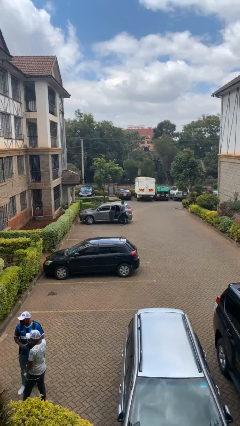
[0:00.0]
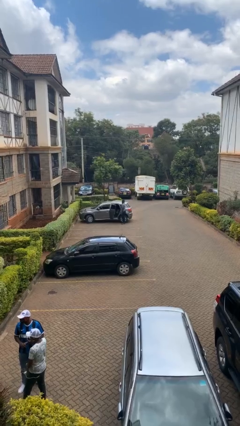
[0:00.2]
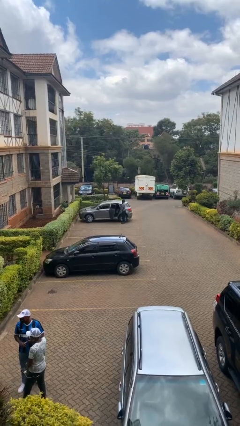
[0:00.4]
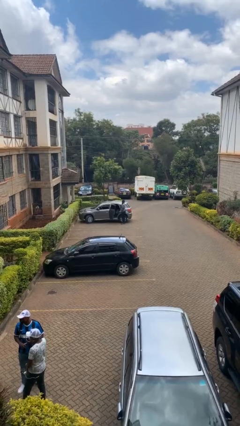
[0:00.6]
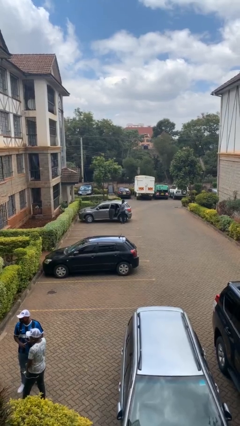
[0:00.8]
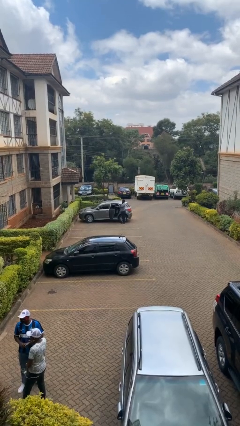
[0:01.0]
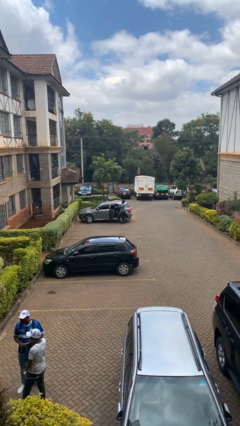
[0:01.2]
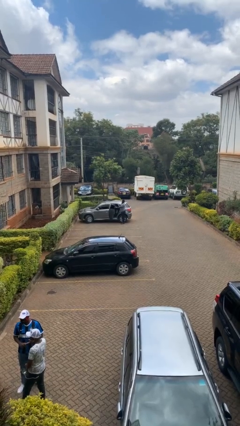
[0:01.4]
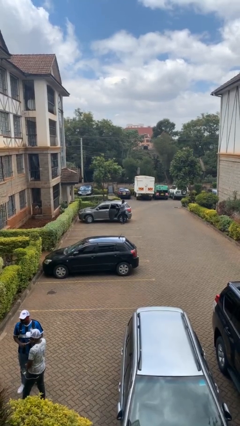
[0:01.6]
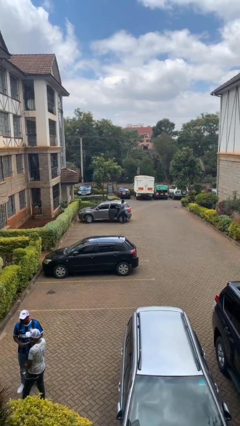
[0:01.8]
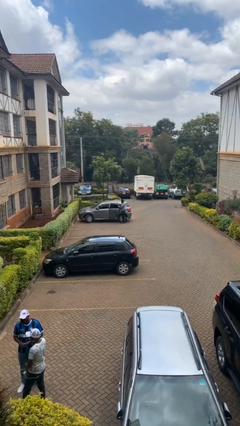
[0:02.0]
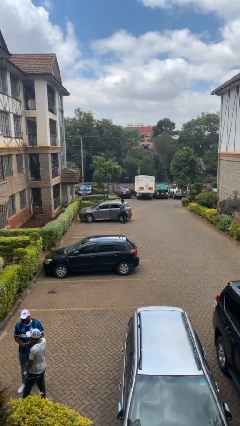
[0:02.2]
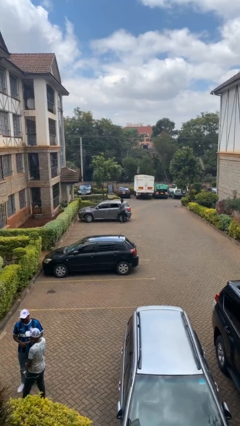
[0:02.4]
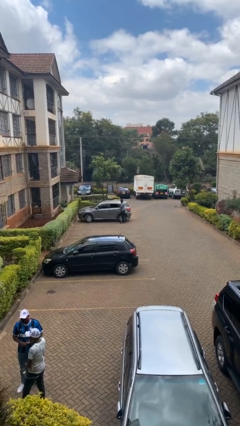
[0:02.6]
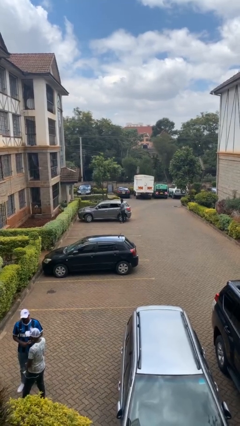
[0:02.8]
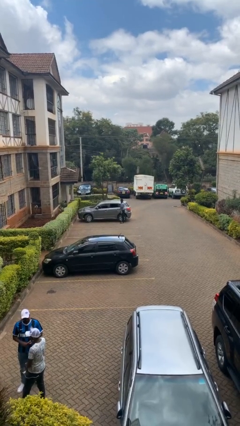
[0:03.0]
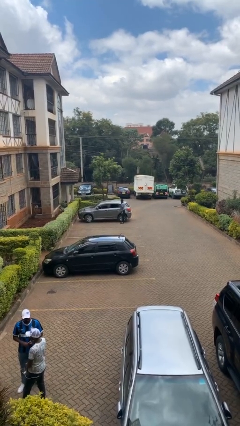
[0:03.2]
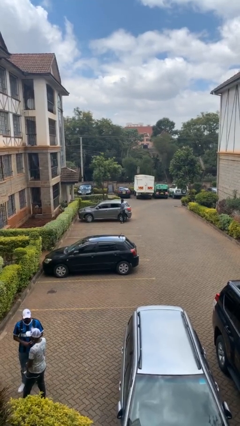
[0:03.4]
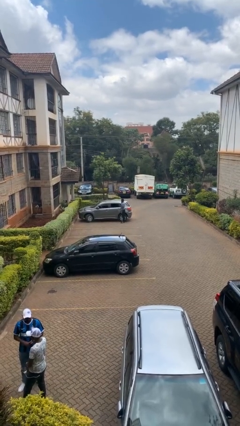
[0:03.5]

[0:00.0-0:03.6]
person closes car door

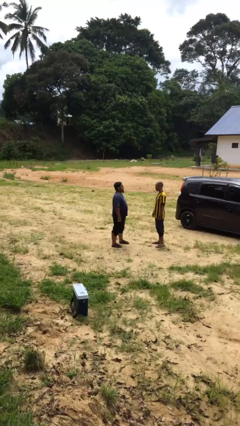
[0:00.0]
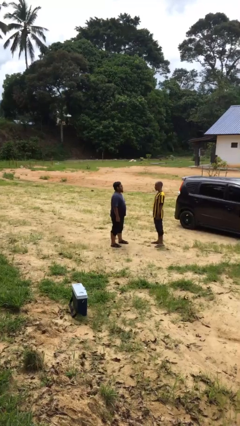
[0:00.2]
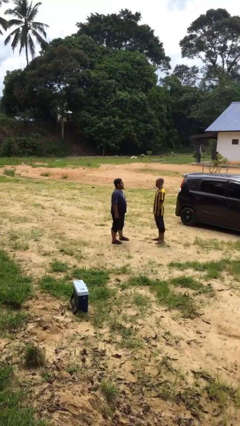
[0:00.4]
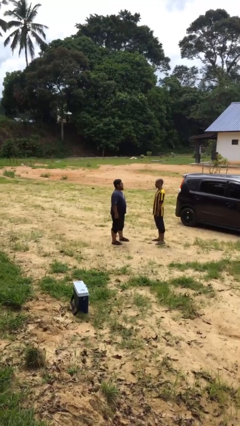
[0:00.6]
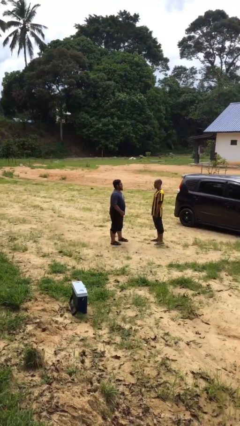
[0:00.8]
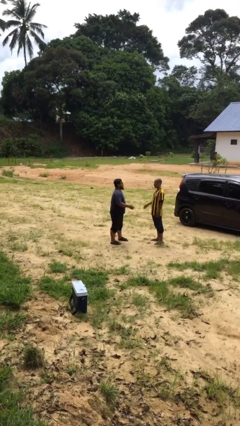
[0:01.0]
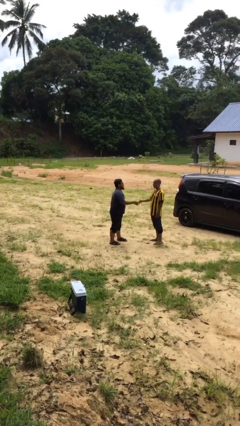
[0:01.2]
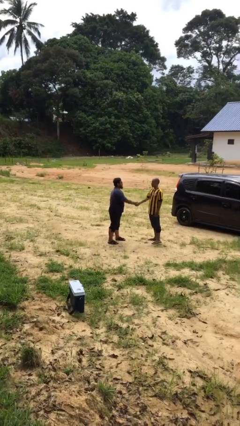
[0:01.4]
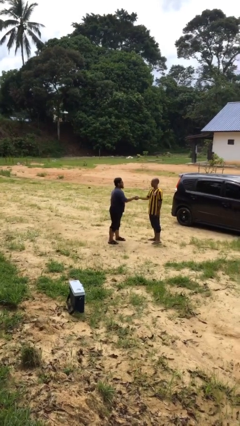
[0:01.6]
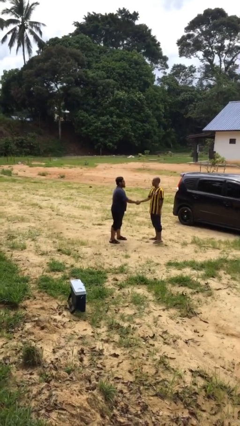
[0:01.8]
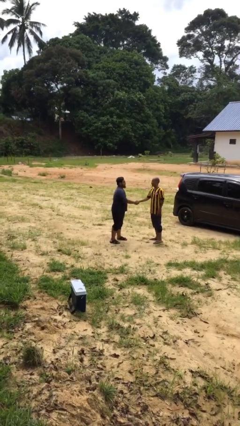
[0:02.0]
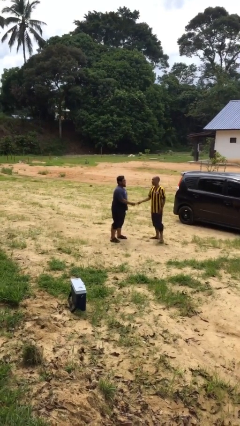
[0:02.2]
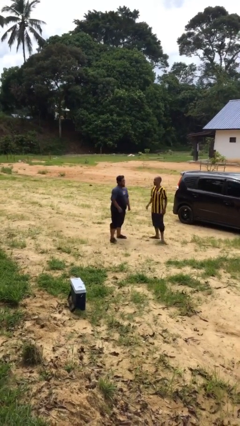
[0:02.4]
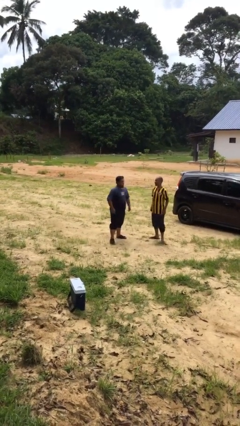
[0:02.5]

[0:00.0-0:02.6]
person shakes hand

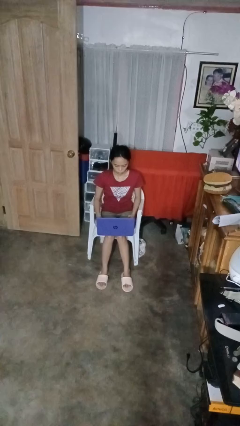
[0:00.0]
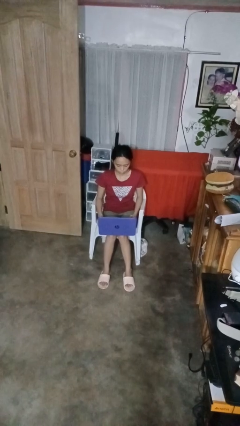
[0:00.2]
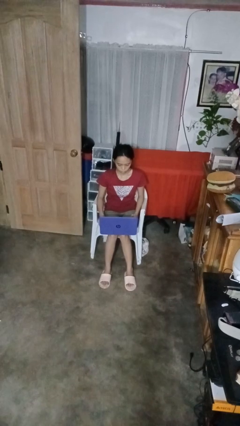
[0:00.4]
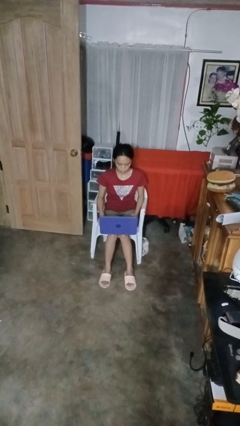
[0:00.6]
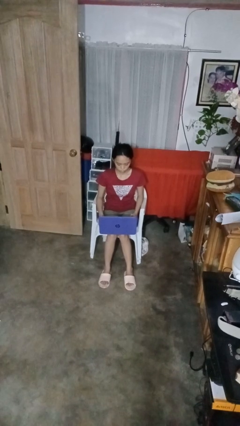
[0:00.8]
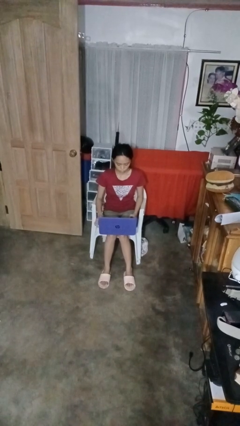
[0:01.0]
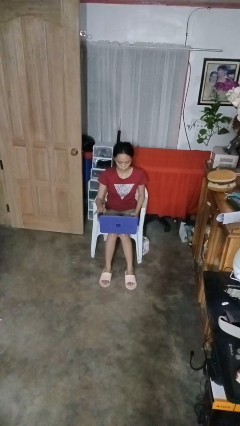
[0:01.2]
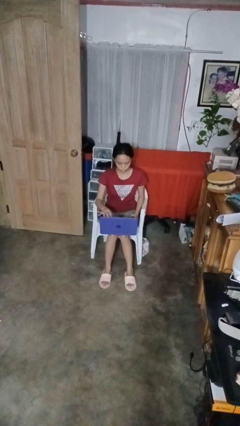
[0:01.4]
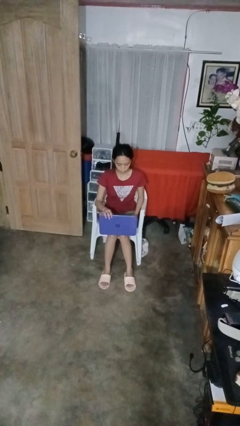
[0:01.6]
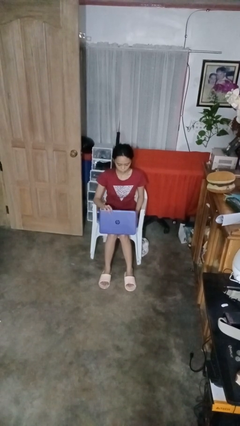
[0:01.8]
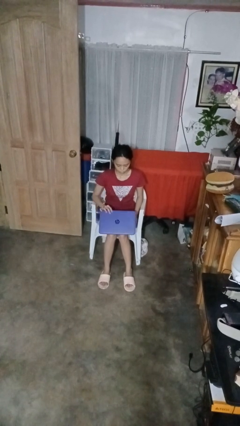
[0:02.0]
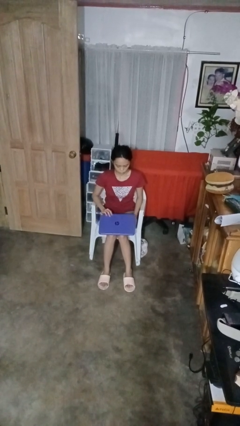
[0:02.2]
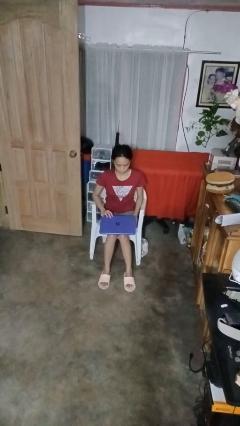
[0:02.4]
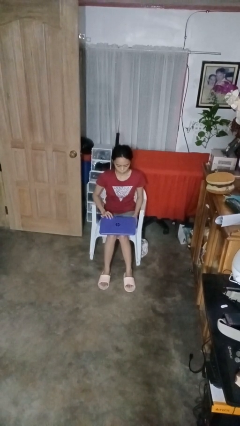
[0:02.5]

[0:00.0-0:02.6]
person closes laptop

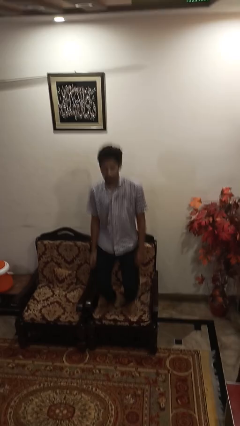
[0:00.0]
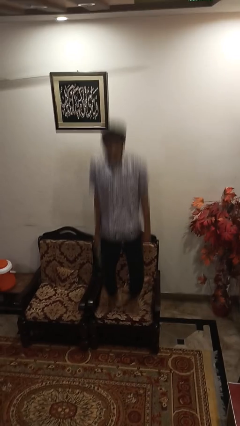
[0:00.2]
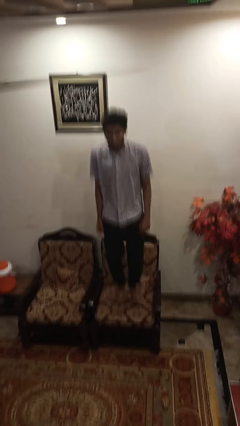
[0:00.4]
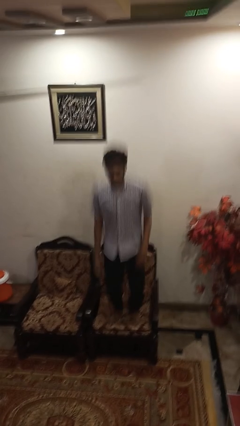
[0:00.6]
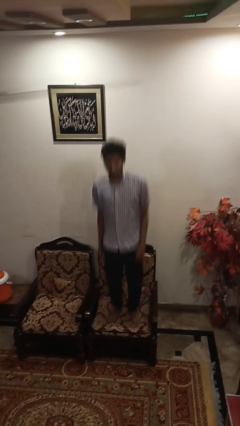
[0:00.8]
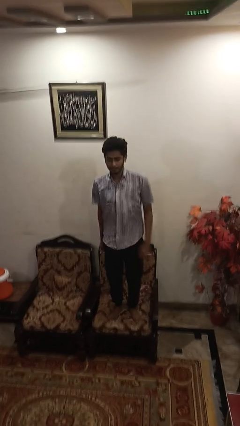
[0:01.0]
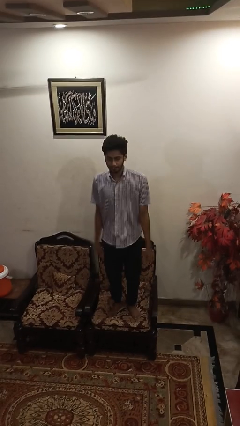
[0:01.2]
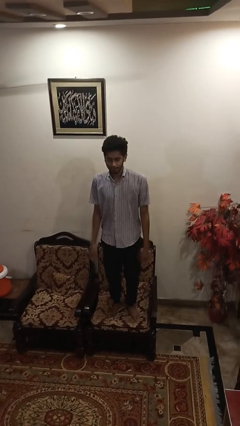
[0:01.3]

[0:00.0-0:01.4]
person jumps on couch

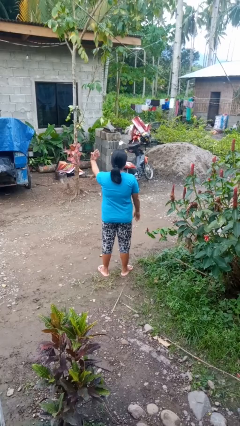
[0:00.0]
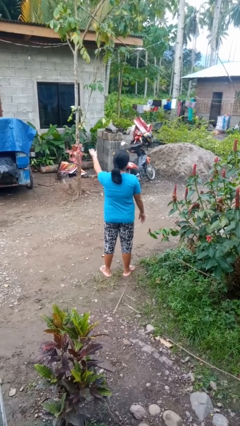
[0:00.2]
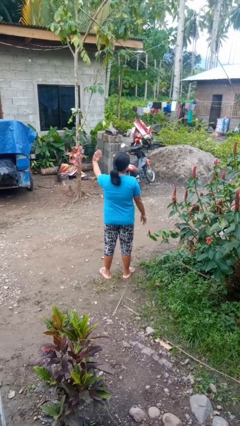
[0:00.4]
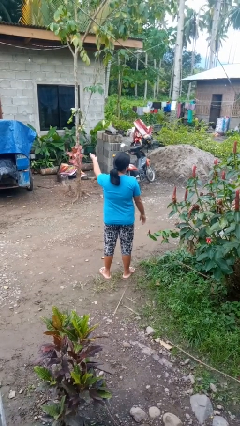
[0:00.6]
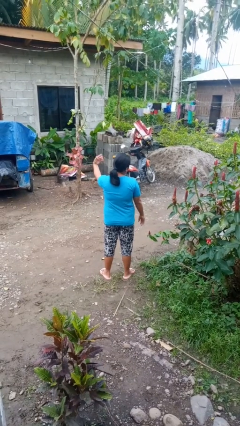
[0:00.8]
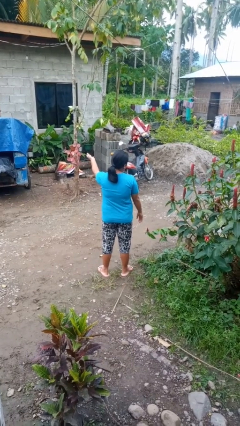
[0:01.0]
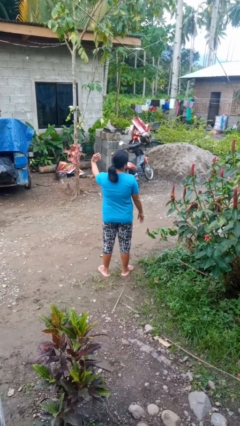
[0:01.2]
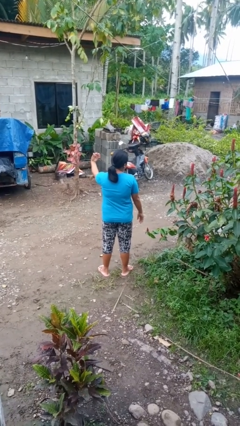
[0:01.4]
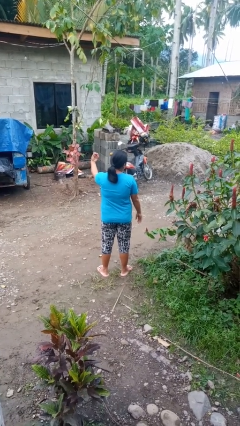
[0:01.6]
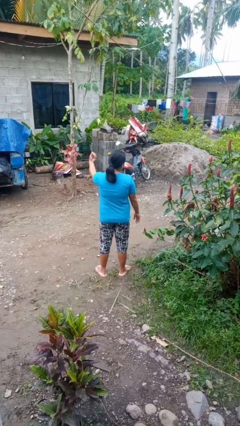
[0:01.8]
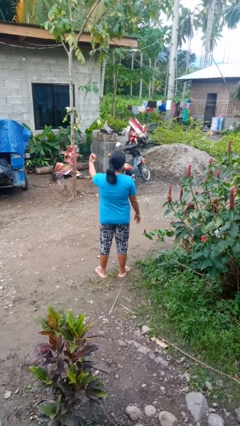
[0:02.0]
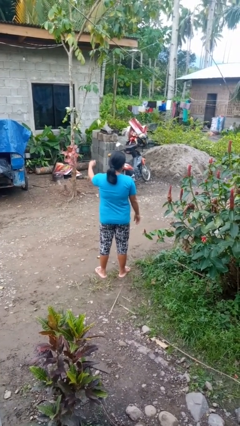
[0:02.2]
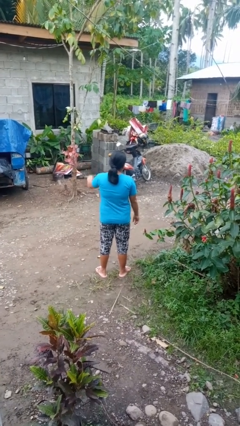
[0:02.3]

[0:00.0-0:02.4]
person gestures come here

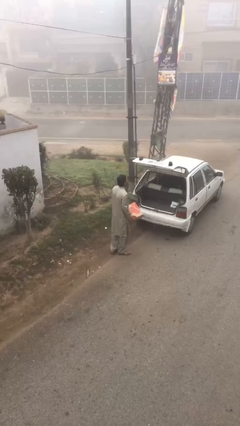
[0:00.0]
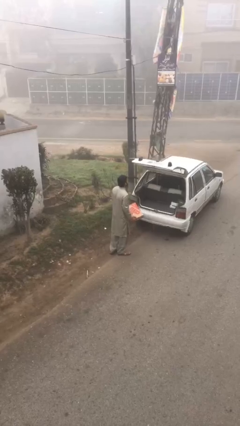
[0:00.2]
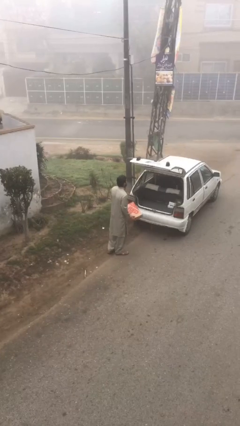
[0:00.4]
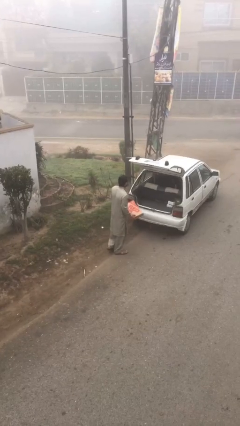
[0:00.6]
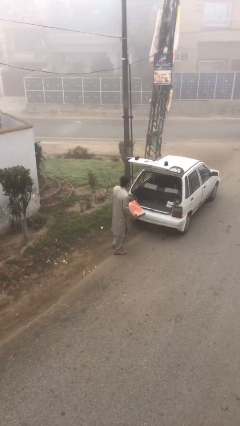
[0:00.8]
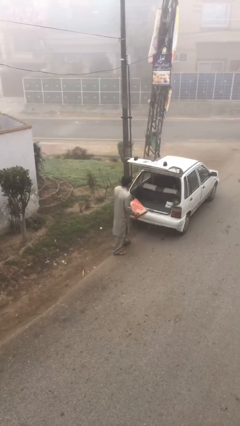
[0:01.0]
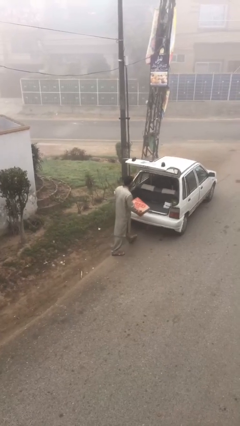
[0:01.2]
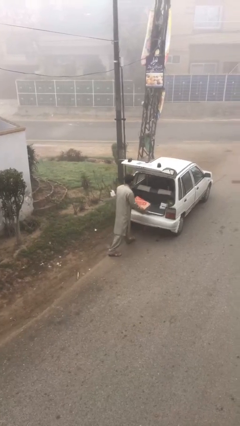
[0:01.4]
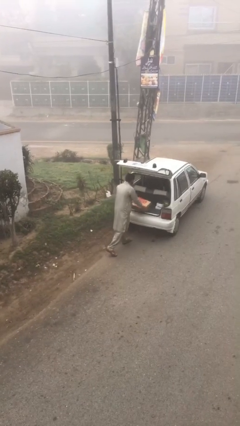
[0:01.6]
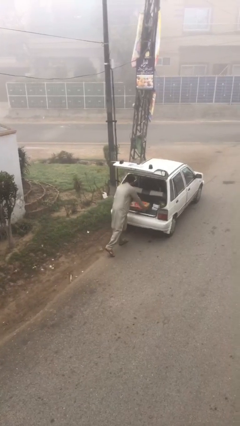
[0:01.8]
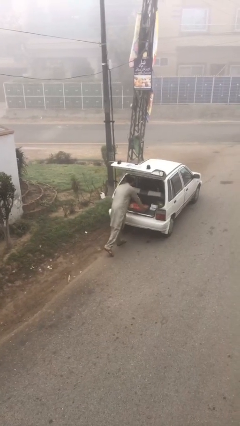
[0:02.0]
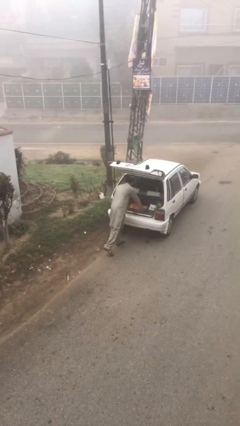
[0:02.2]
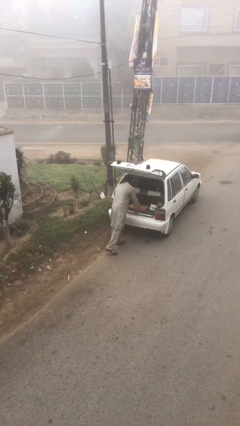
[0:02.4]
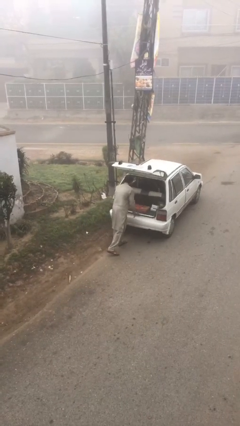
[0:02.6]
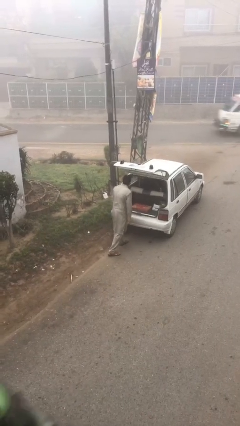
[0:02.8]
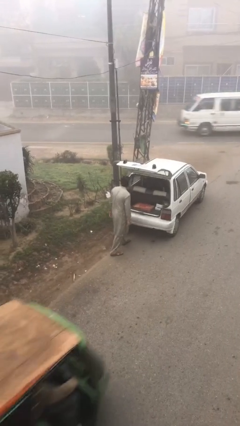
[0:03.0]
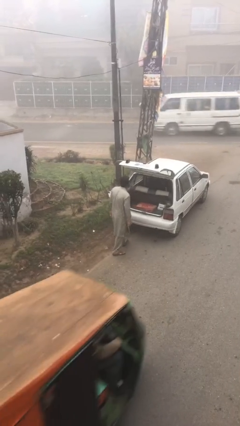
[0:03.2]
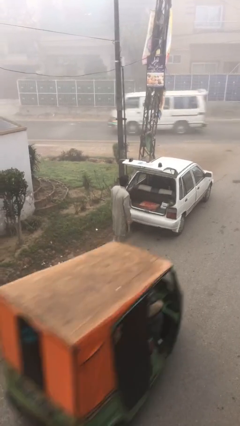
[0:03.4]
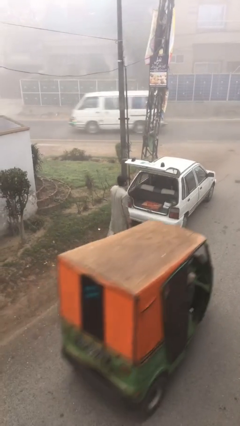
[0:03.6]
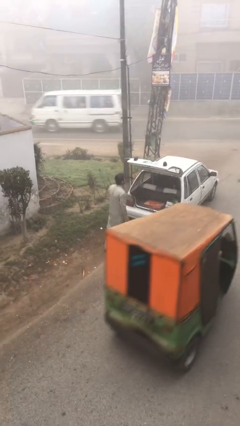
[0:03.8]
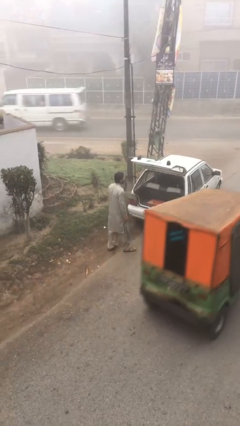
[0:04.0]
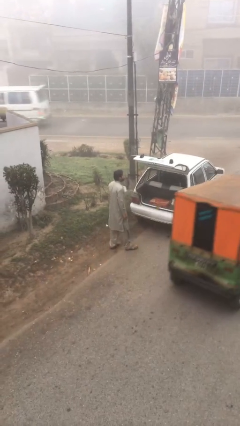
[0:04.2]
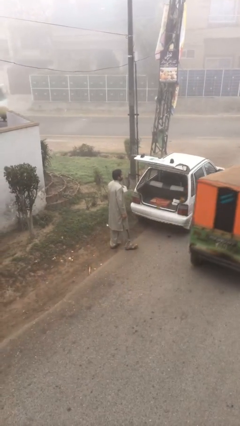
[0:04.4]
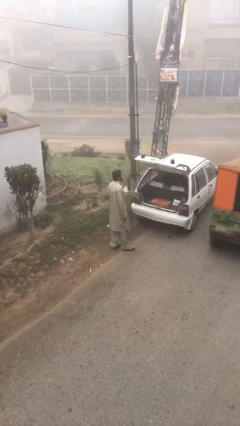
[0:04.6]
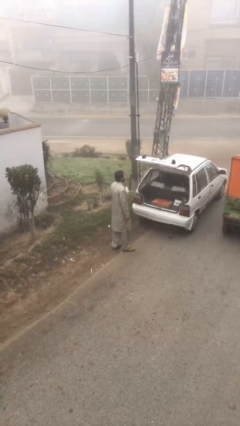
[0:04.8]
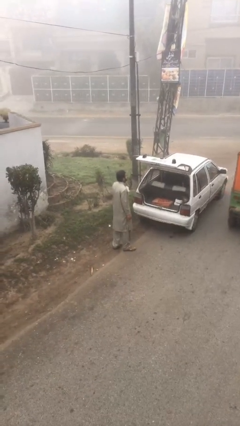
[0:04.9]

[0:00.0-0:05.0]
person loads car
